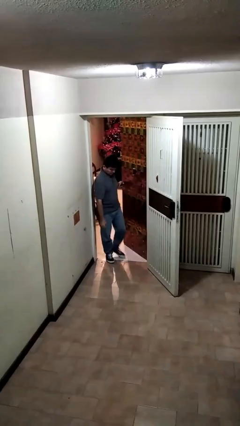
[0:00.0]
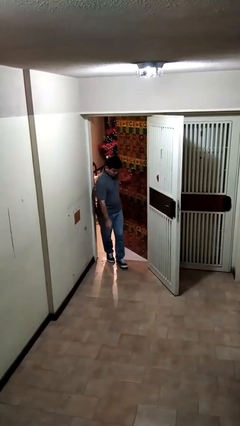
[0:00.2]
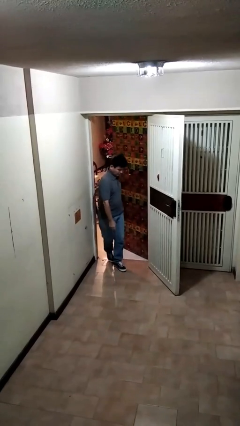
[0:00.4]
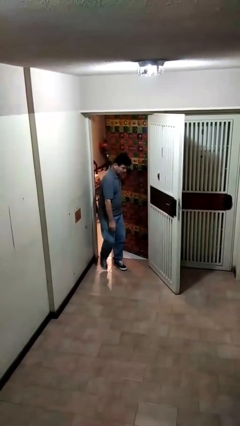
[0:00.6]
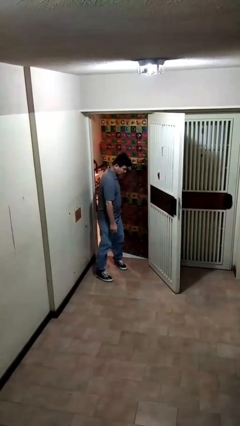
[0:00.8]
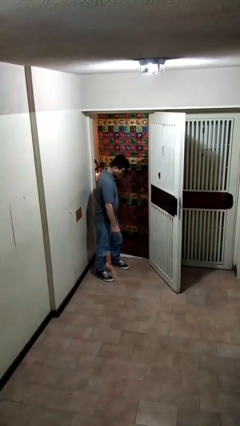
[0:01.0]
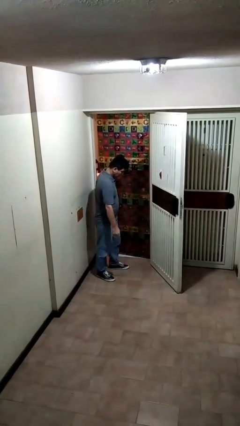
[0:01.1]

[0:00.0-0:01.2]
person closes facility door

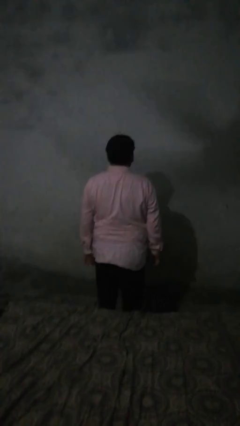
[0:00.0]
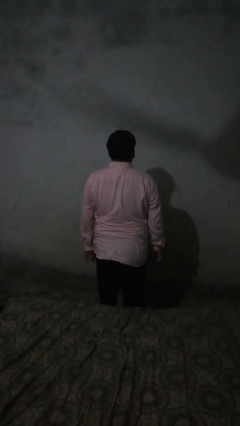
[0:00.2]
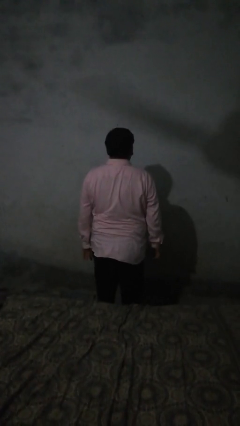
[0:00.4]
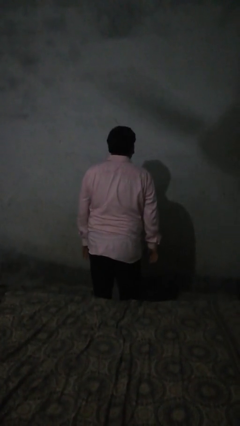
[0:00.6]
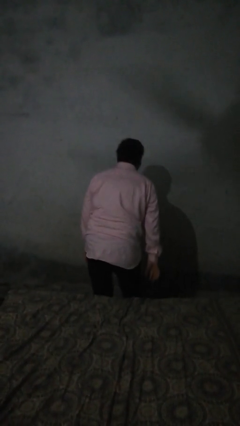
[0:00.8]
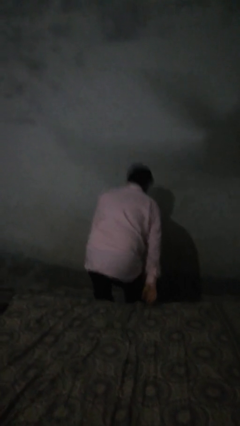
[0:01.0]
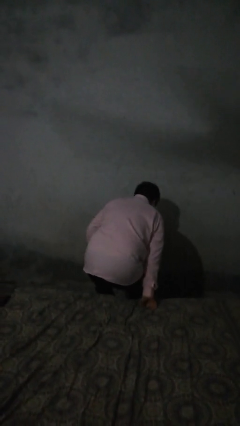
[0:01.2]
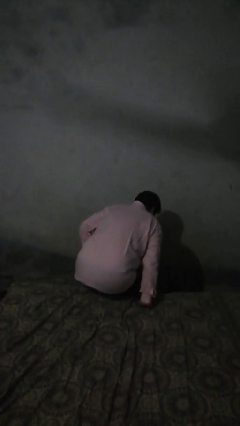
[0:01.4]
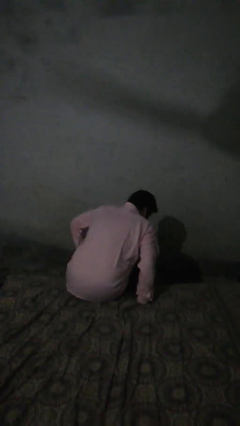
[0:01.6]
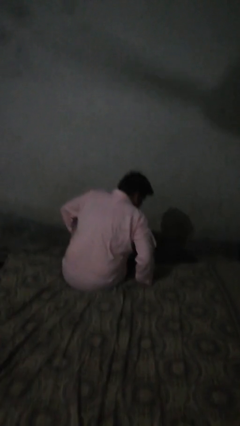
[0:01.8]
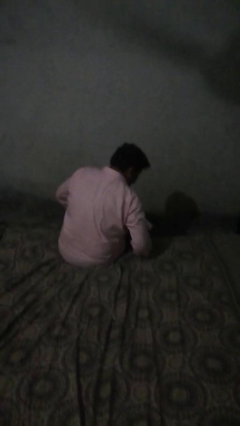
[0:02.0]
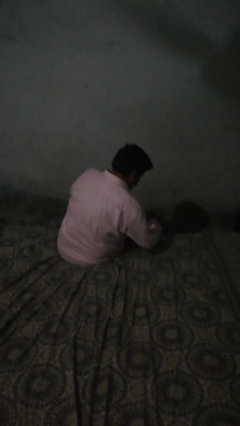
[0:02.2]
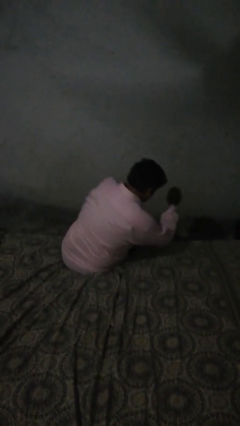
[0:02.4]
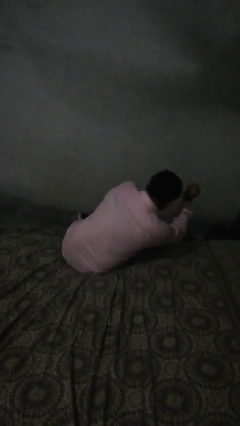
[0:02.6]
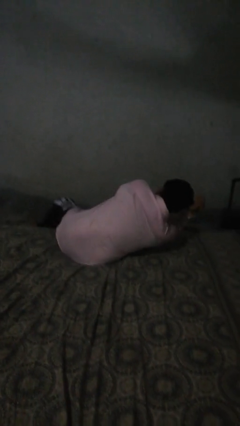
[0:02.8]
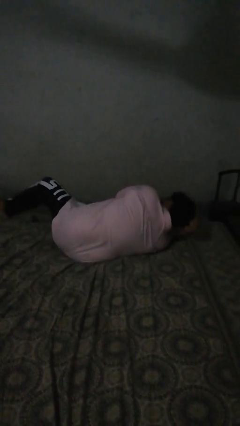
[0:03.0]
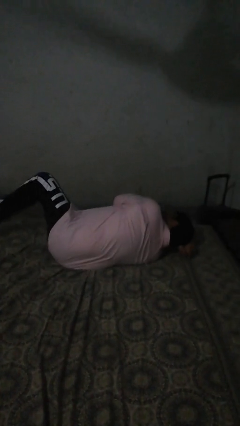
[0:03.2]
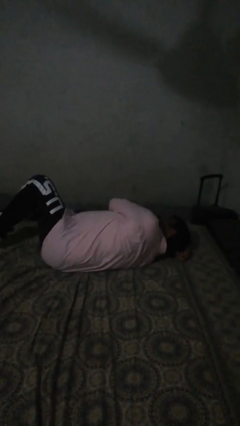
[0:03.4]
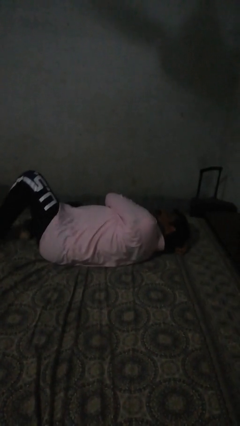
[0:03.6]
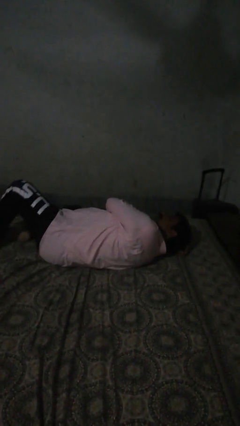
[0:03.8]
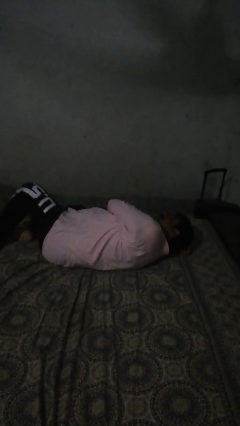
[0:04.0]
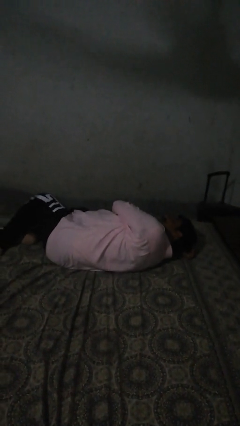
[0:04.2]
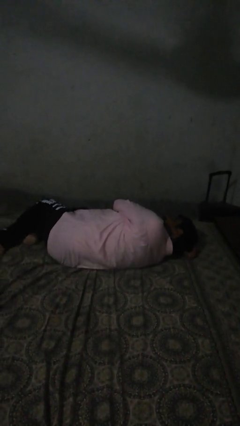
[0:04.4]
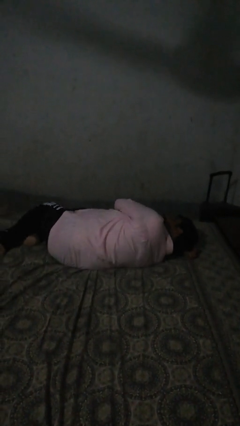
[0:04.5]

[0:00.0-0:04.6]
person lies down on bed

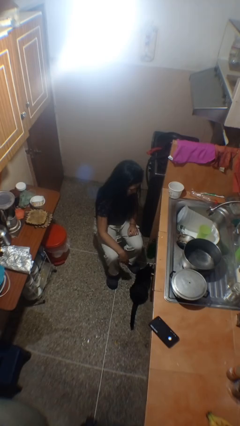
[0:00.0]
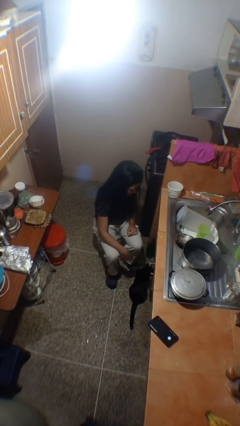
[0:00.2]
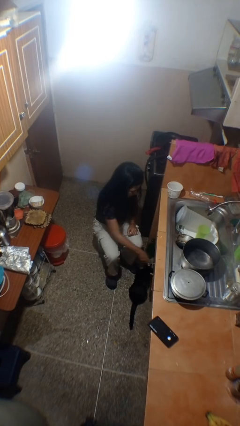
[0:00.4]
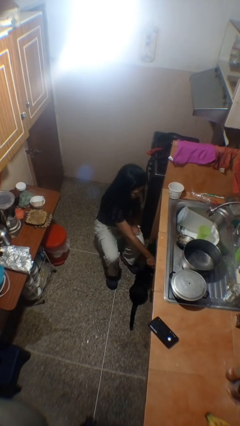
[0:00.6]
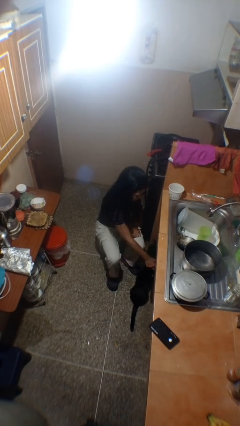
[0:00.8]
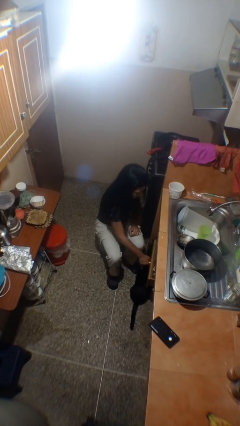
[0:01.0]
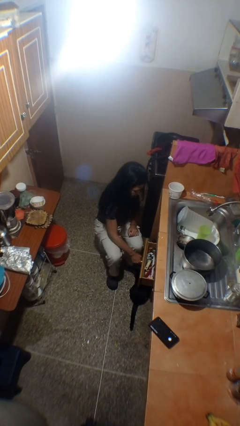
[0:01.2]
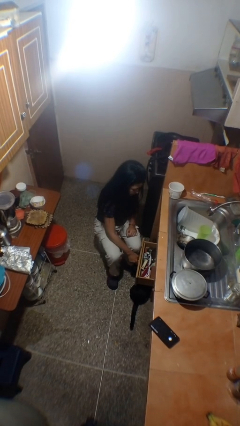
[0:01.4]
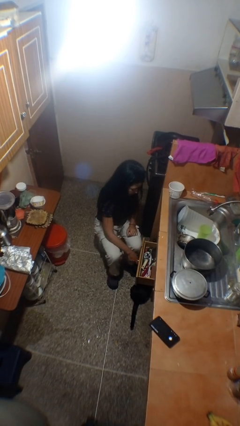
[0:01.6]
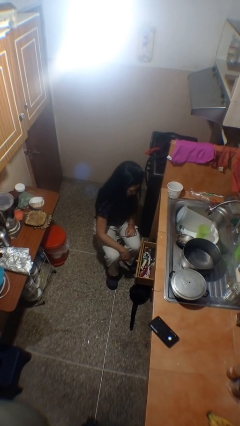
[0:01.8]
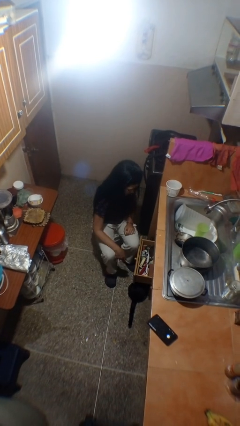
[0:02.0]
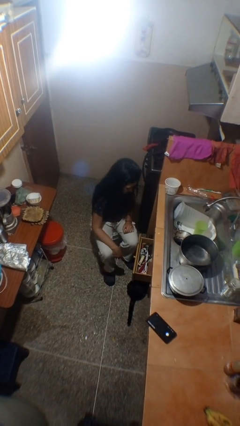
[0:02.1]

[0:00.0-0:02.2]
person opens kitchen drawer

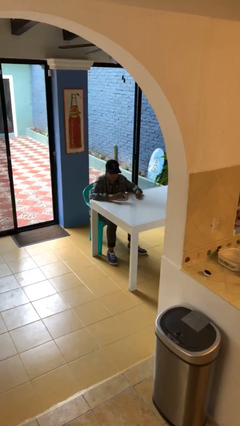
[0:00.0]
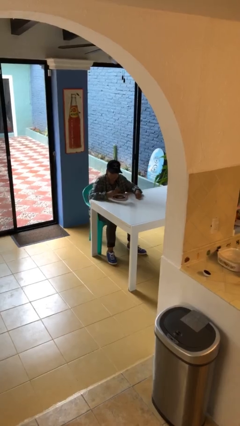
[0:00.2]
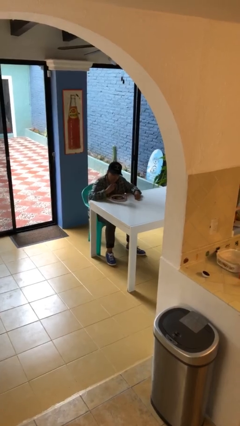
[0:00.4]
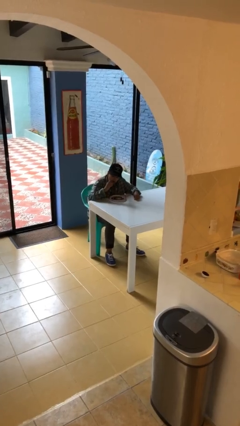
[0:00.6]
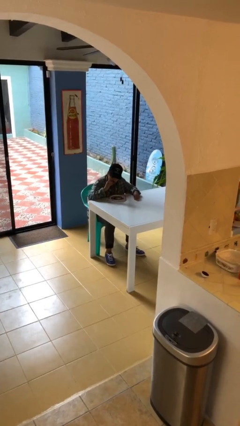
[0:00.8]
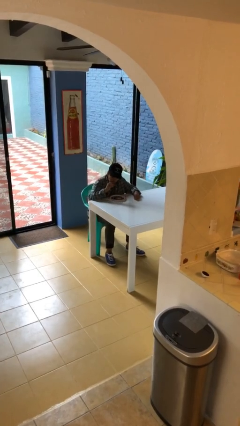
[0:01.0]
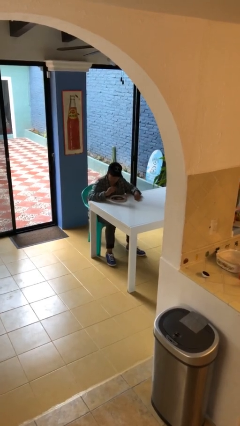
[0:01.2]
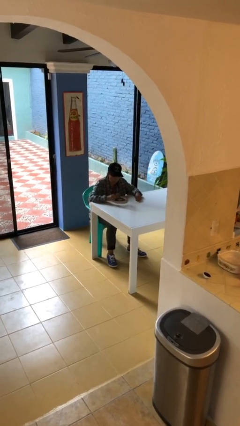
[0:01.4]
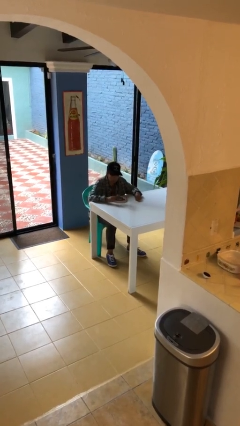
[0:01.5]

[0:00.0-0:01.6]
person eats with hands

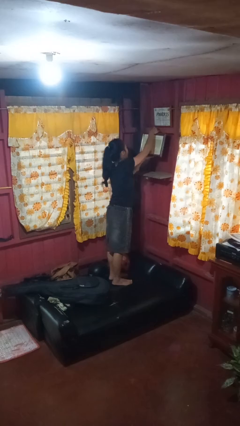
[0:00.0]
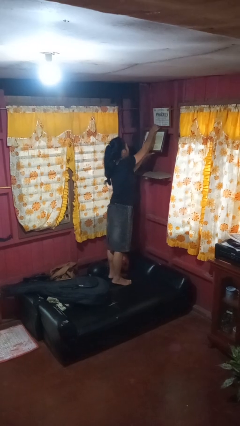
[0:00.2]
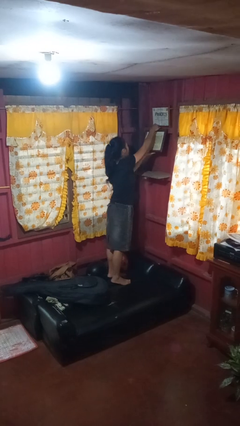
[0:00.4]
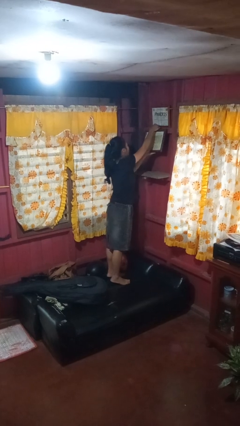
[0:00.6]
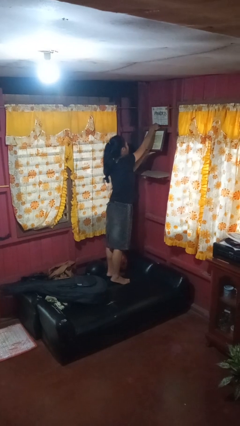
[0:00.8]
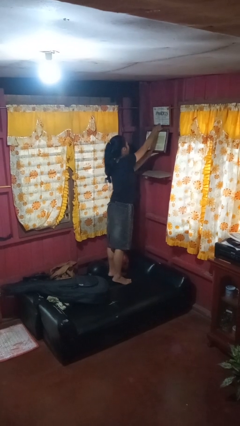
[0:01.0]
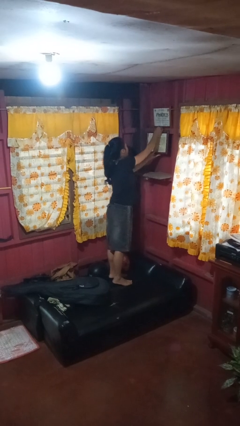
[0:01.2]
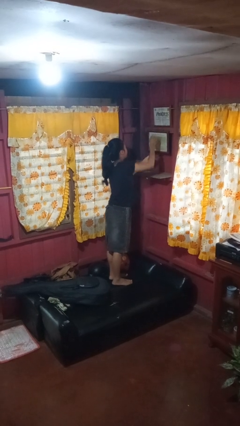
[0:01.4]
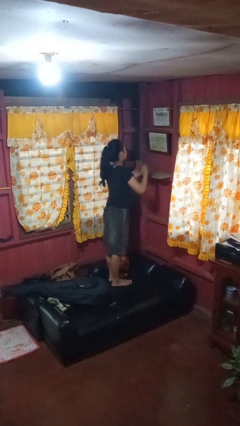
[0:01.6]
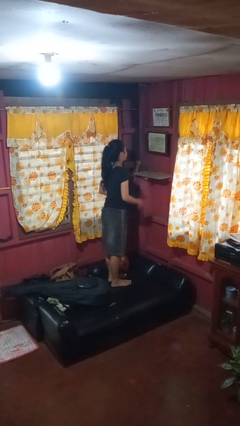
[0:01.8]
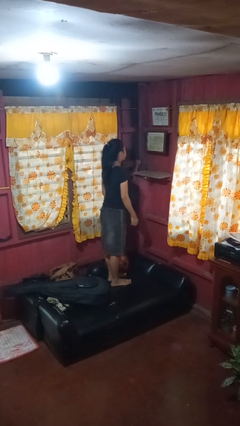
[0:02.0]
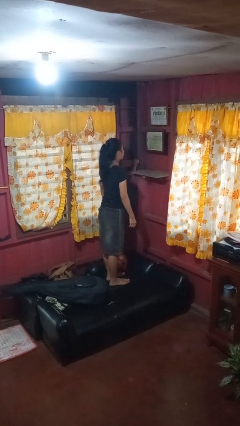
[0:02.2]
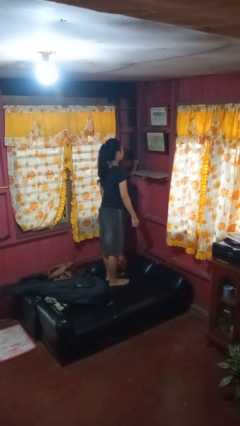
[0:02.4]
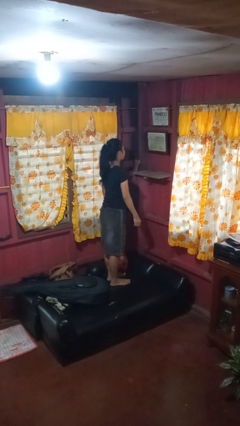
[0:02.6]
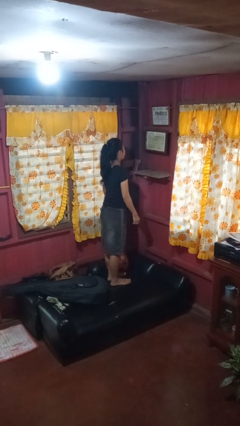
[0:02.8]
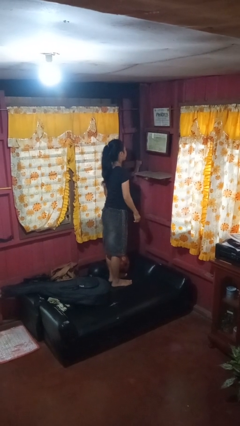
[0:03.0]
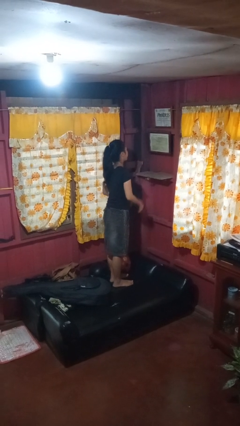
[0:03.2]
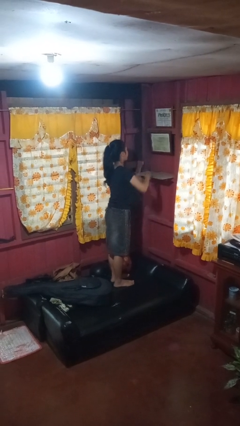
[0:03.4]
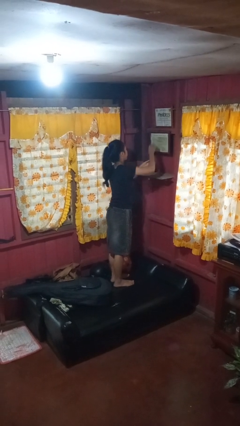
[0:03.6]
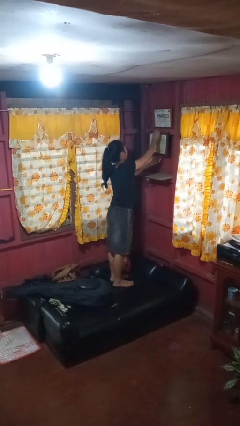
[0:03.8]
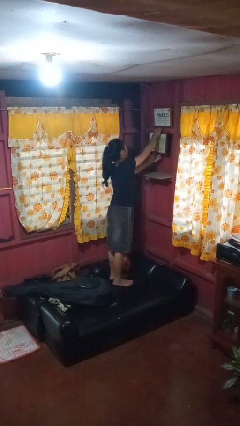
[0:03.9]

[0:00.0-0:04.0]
person puts up picture frame

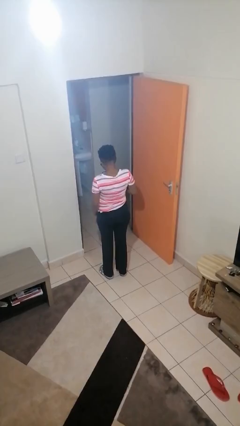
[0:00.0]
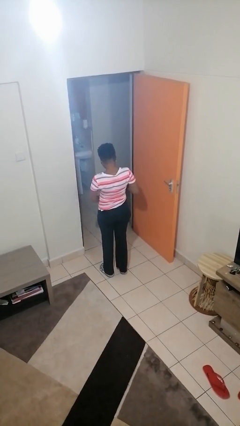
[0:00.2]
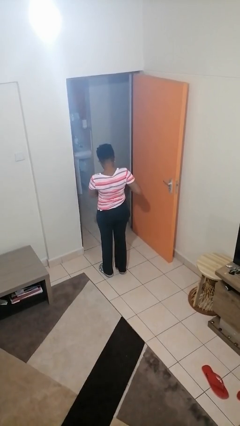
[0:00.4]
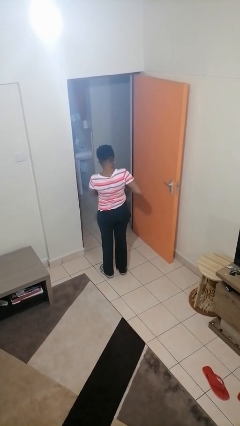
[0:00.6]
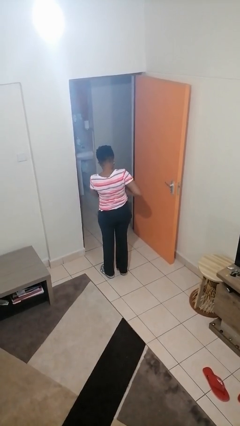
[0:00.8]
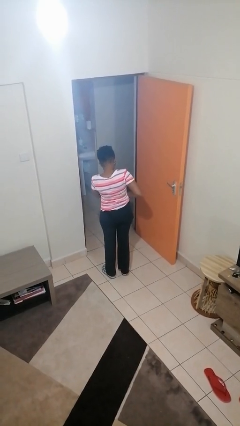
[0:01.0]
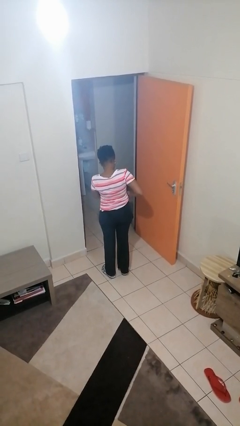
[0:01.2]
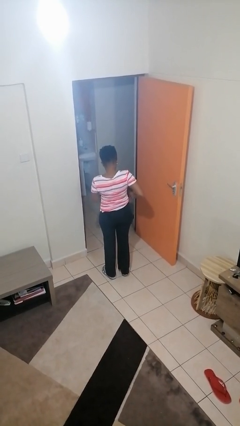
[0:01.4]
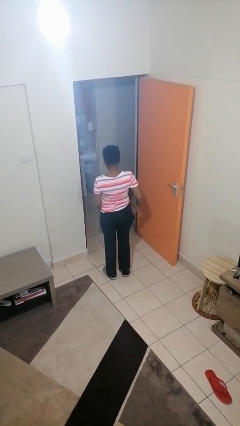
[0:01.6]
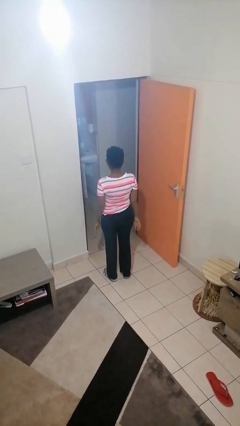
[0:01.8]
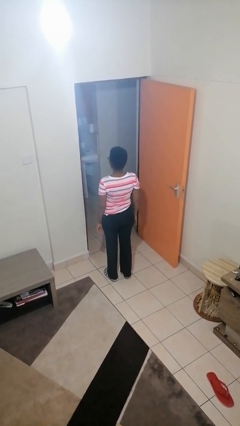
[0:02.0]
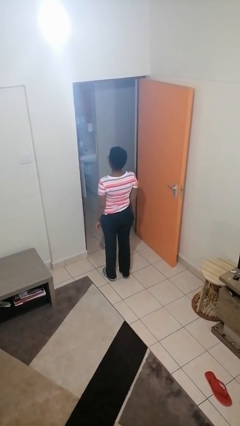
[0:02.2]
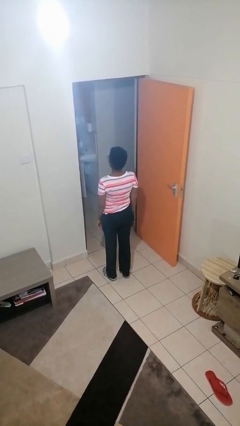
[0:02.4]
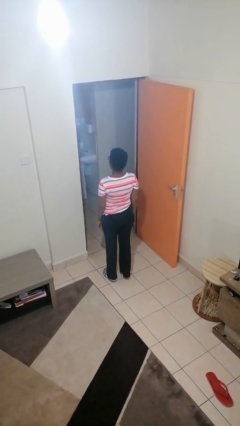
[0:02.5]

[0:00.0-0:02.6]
person puts phone into pocket

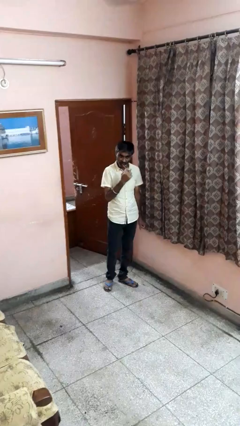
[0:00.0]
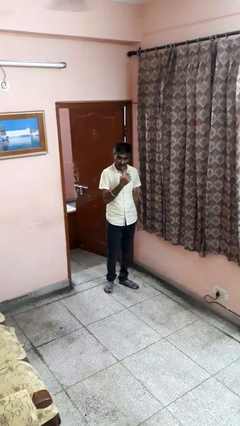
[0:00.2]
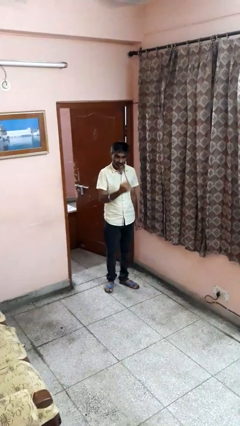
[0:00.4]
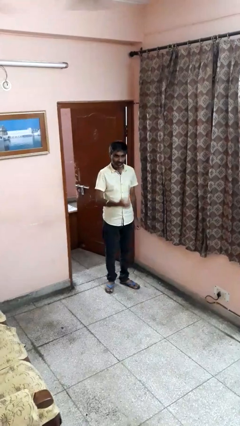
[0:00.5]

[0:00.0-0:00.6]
person brushes teeth
